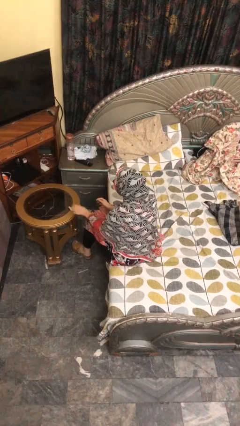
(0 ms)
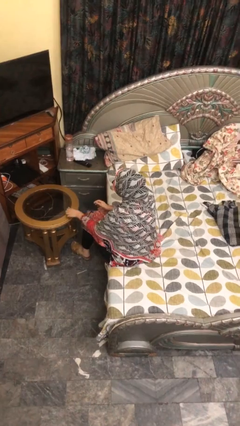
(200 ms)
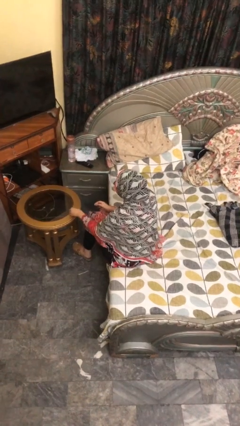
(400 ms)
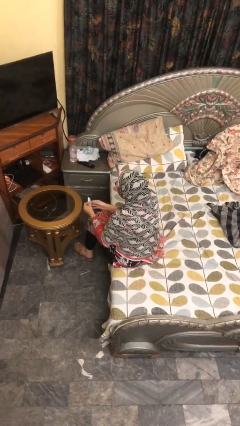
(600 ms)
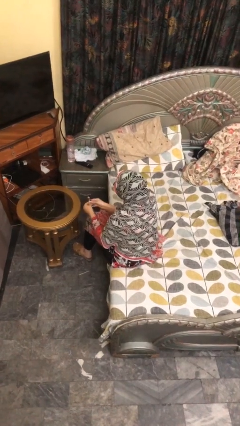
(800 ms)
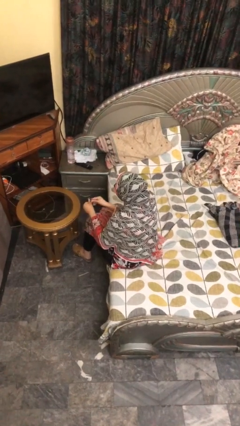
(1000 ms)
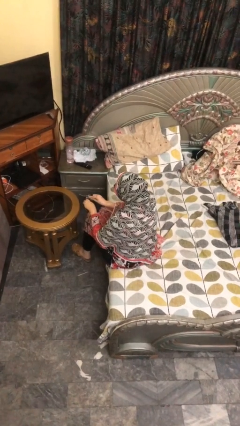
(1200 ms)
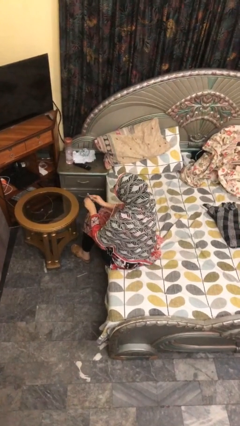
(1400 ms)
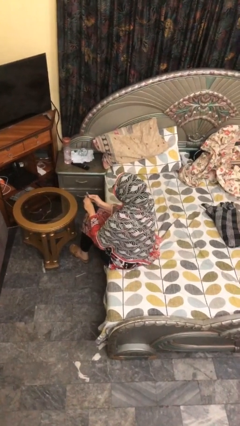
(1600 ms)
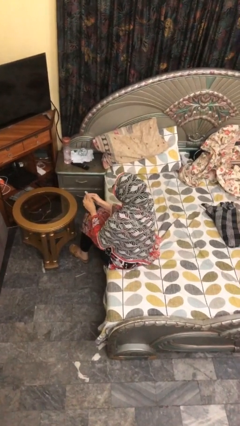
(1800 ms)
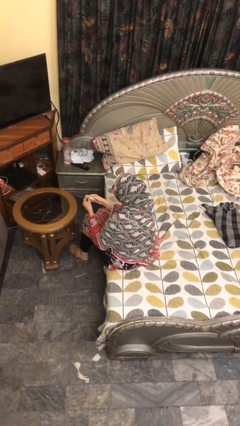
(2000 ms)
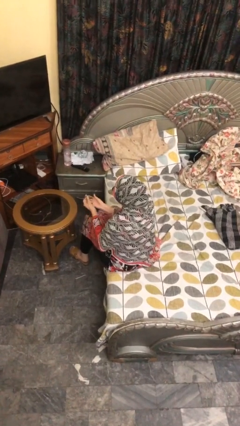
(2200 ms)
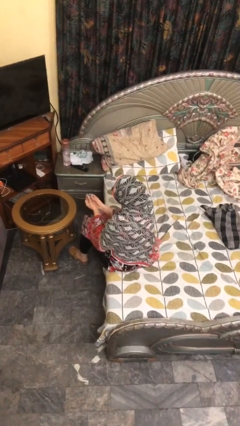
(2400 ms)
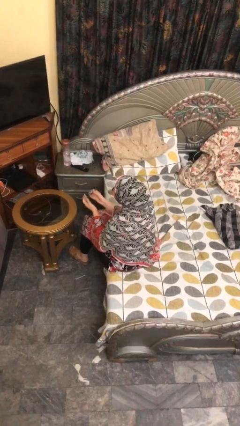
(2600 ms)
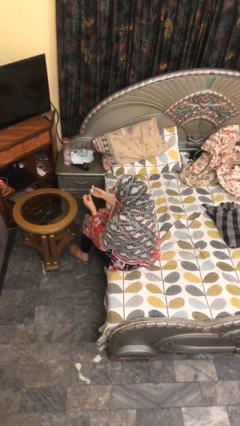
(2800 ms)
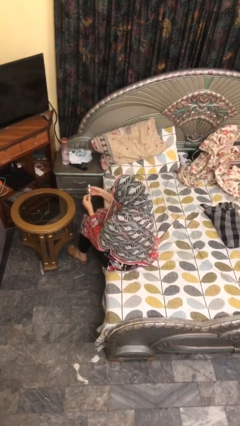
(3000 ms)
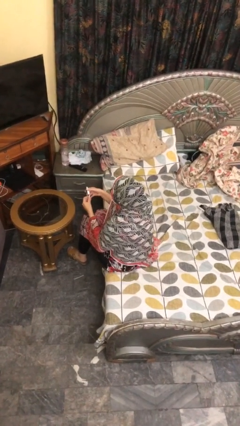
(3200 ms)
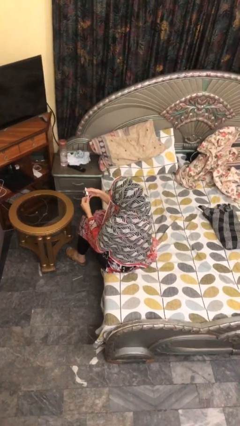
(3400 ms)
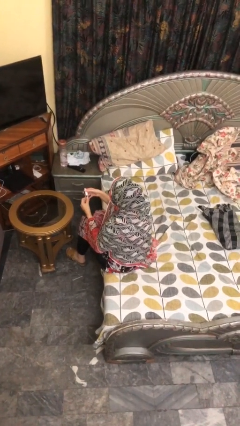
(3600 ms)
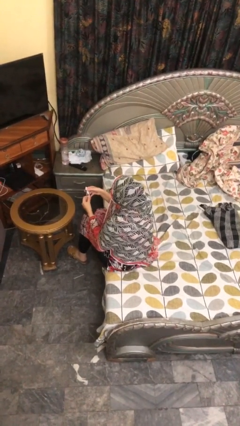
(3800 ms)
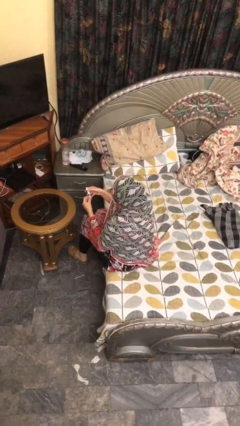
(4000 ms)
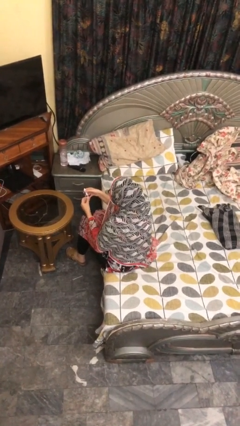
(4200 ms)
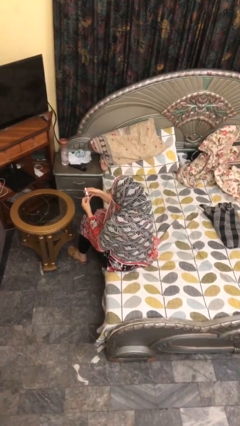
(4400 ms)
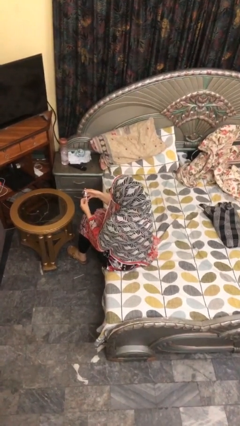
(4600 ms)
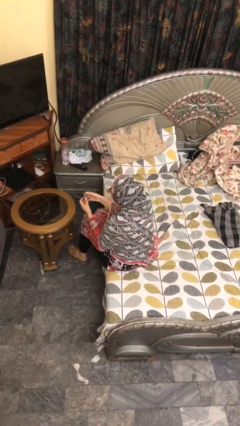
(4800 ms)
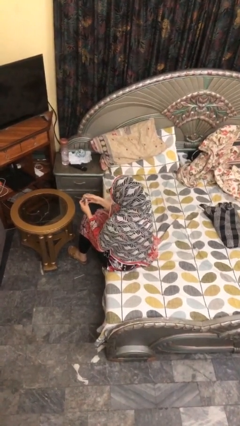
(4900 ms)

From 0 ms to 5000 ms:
person clips fingernails

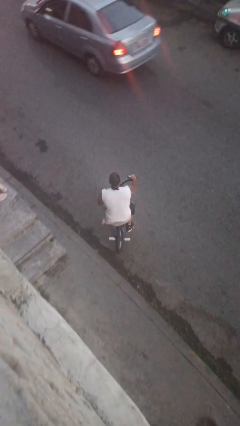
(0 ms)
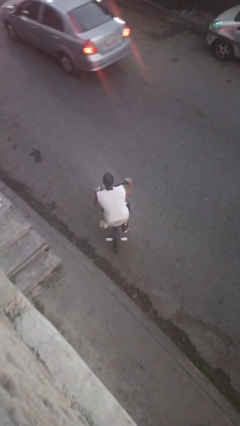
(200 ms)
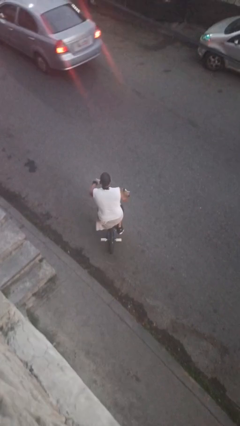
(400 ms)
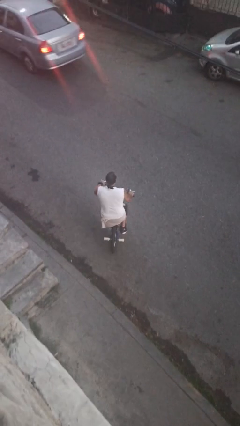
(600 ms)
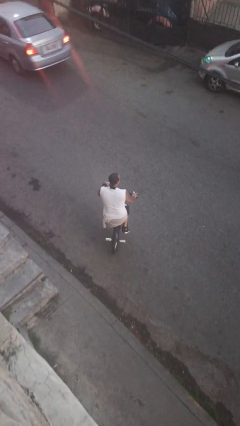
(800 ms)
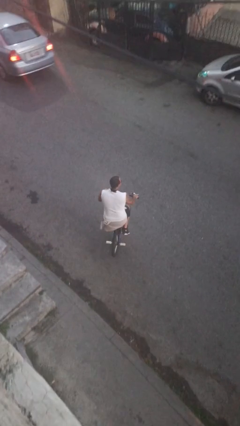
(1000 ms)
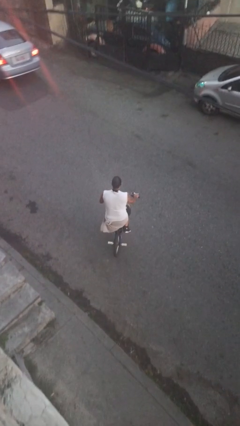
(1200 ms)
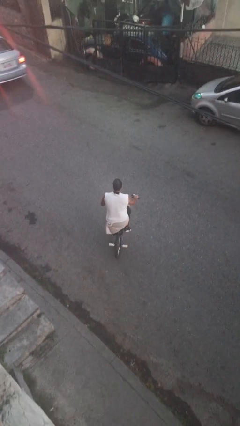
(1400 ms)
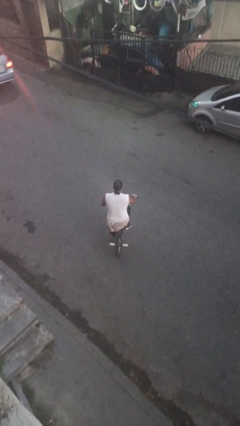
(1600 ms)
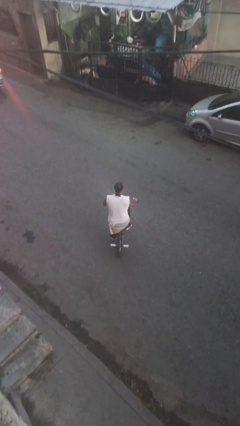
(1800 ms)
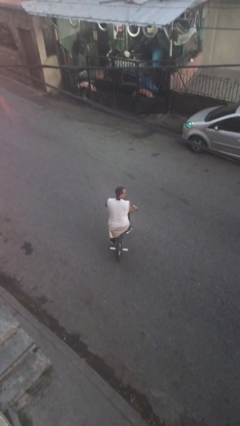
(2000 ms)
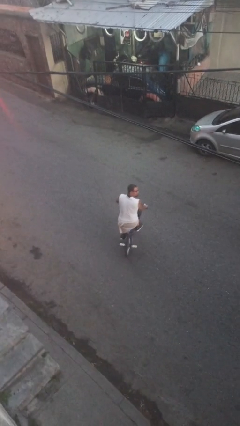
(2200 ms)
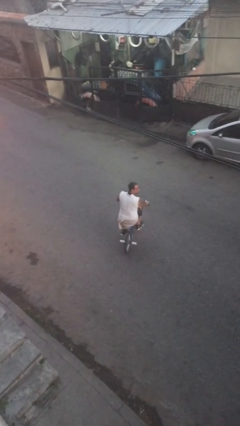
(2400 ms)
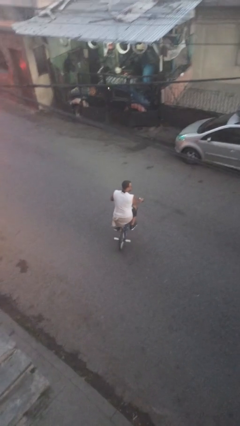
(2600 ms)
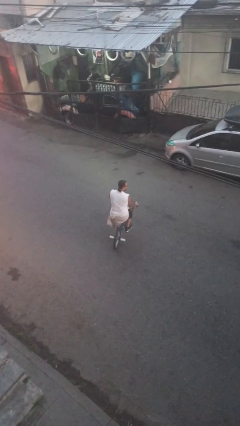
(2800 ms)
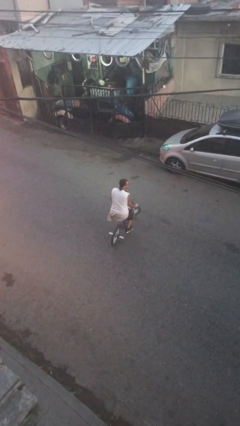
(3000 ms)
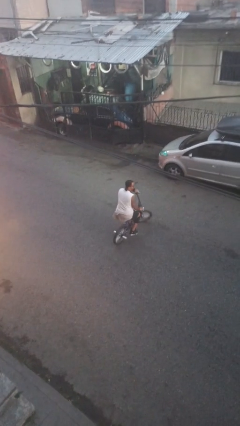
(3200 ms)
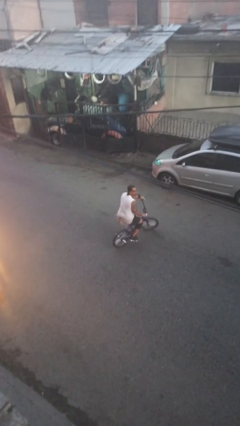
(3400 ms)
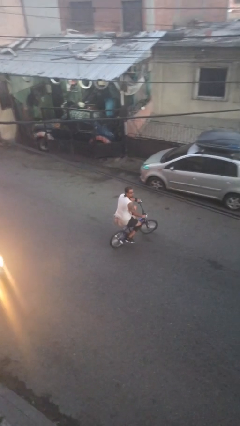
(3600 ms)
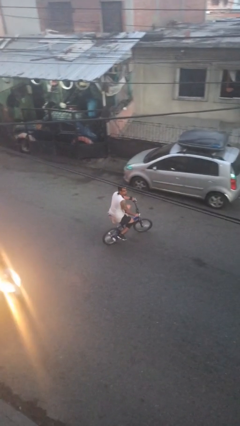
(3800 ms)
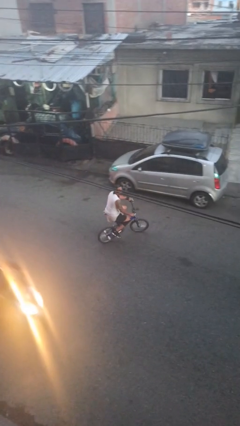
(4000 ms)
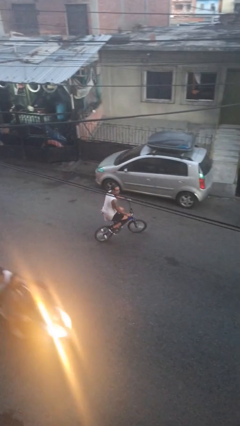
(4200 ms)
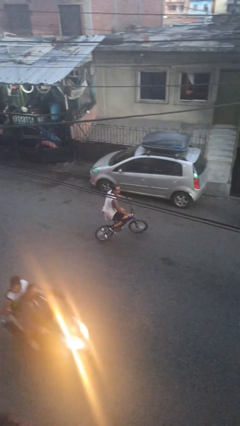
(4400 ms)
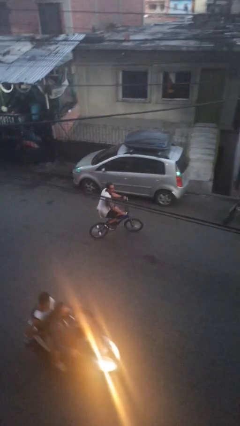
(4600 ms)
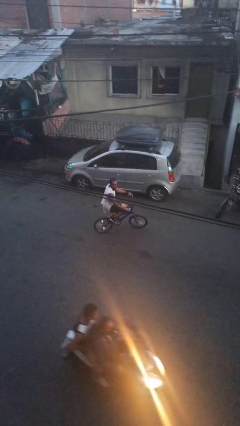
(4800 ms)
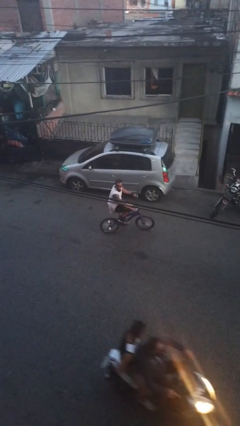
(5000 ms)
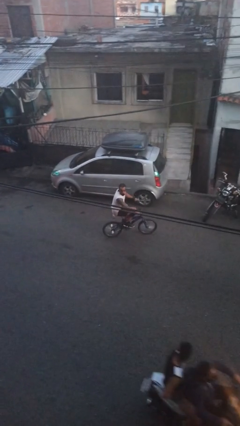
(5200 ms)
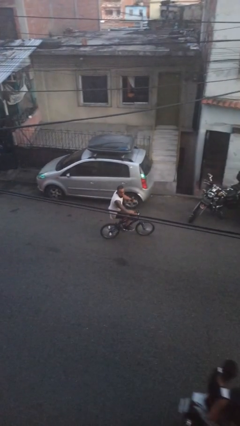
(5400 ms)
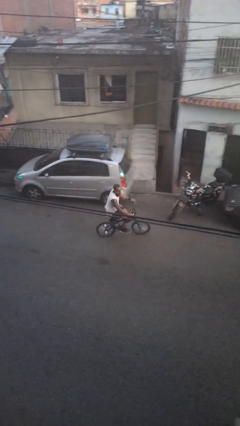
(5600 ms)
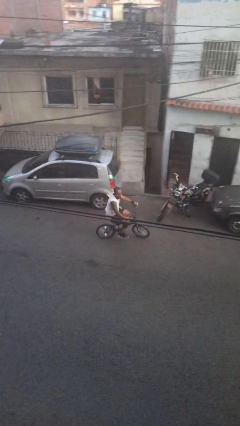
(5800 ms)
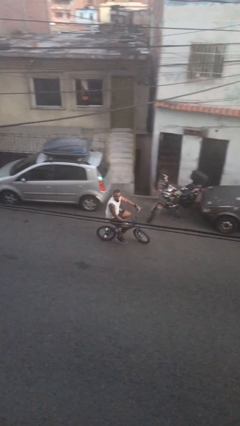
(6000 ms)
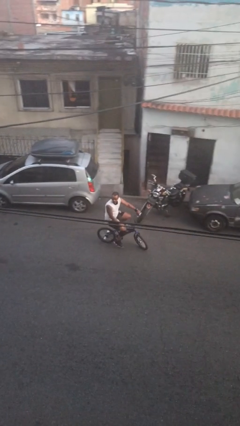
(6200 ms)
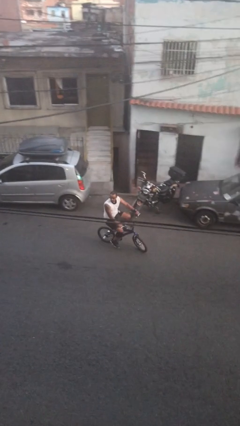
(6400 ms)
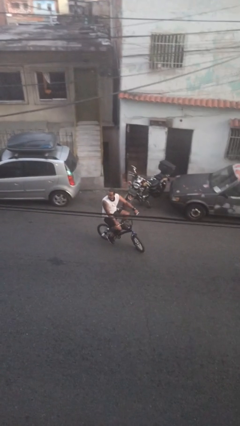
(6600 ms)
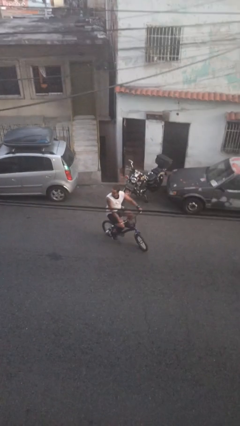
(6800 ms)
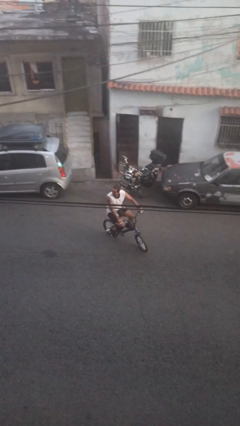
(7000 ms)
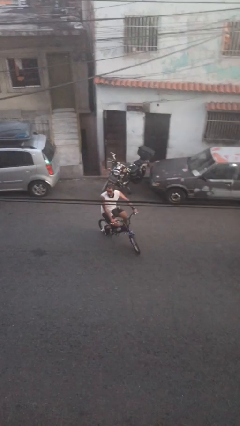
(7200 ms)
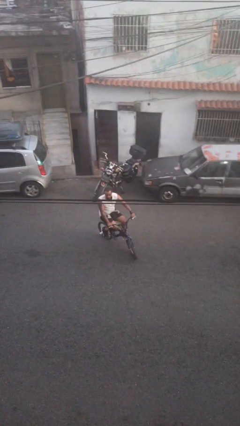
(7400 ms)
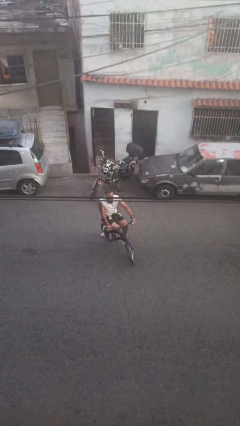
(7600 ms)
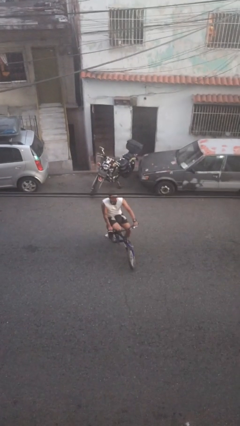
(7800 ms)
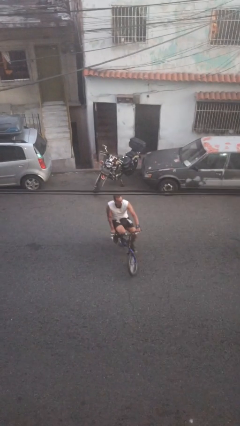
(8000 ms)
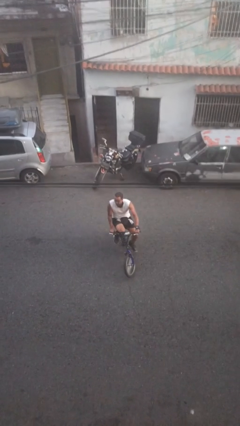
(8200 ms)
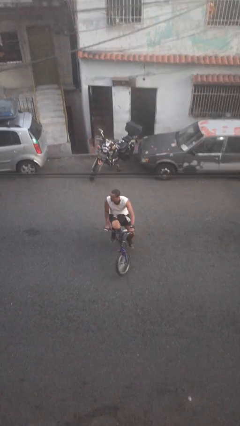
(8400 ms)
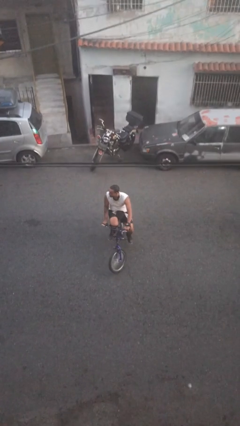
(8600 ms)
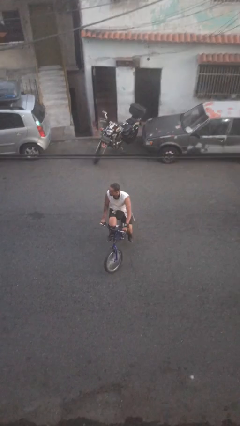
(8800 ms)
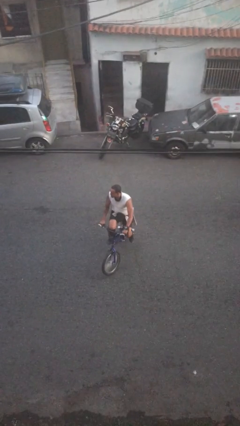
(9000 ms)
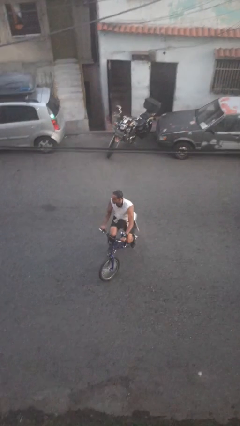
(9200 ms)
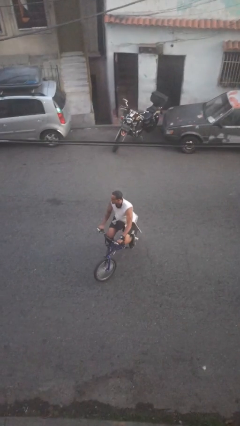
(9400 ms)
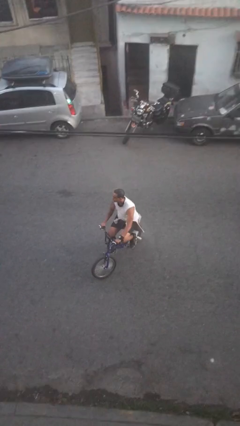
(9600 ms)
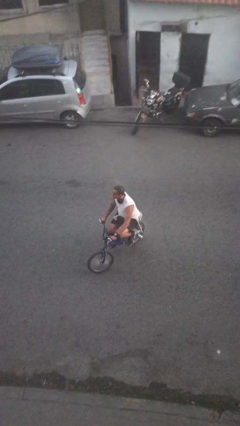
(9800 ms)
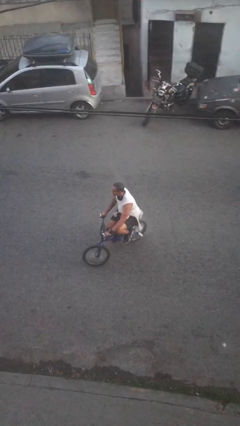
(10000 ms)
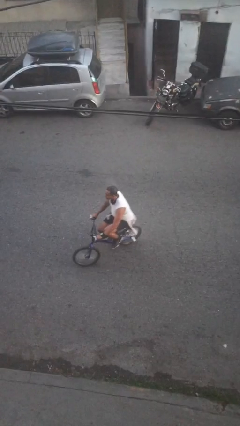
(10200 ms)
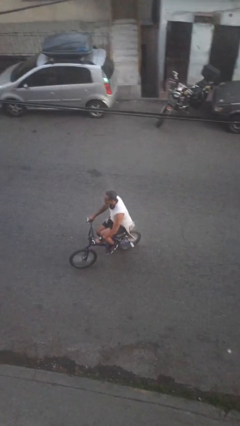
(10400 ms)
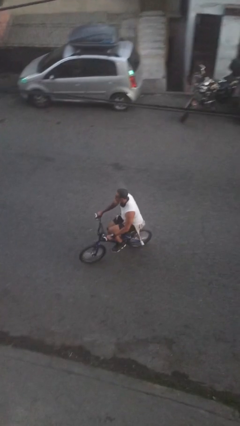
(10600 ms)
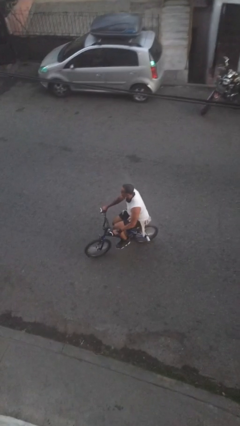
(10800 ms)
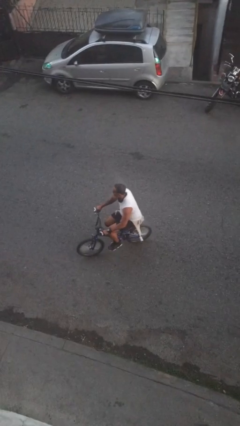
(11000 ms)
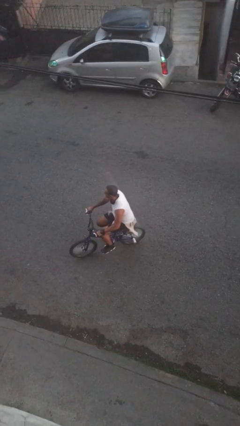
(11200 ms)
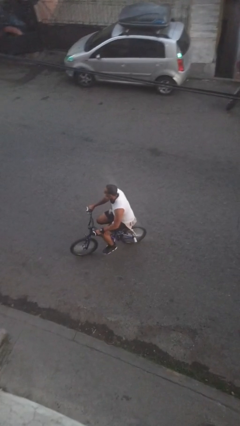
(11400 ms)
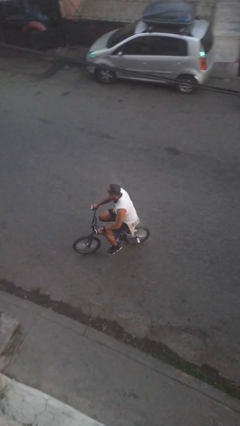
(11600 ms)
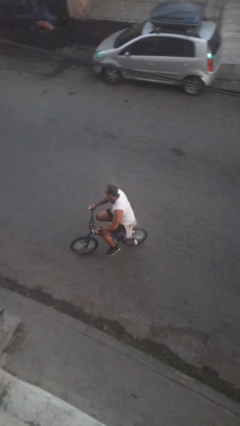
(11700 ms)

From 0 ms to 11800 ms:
person rides bicycle

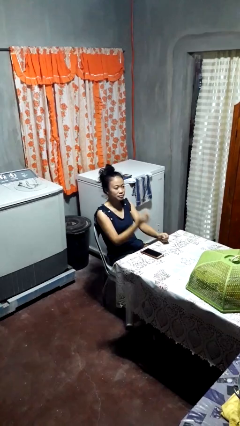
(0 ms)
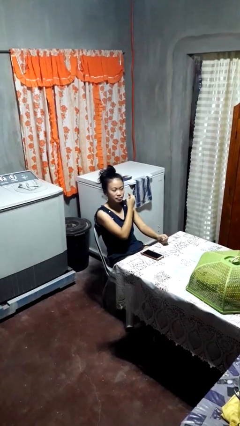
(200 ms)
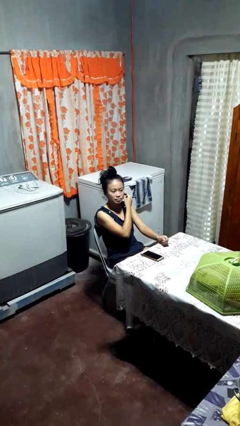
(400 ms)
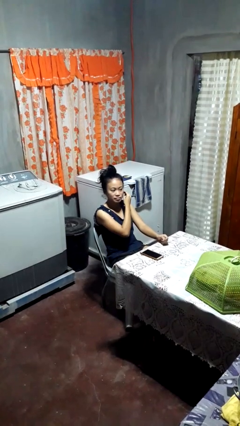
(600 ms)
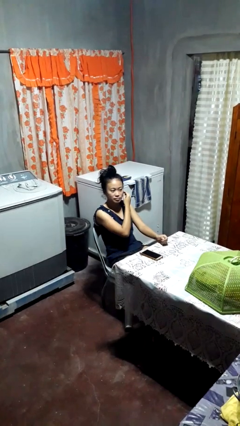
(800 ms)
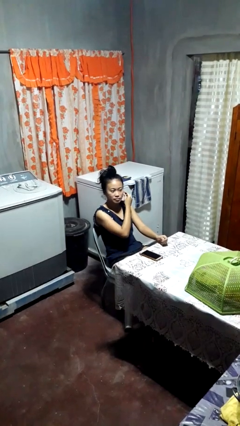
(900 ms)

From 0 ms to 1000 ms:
person takes off earrings
